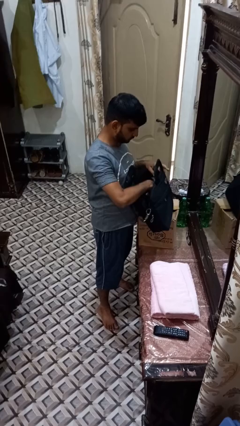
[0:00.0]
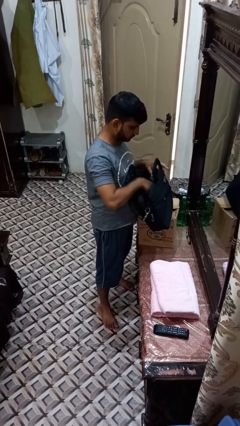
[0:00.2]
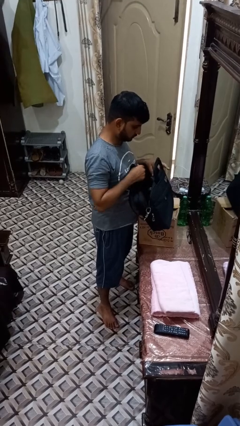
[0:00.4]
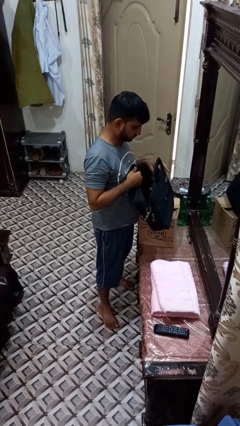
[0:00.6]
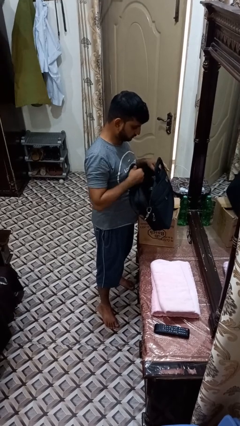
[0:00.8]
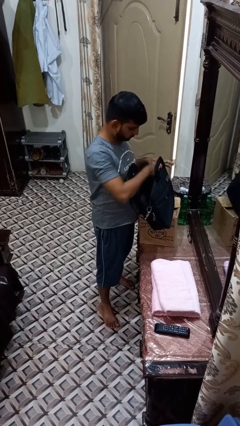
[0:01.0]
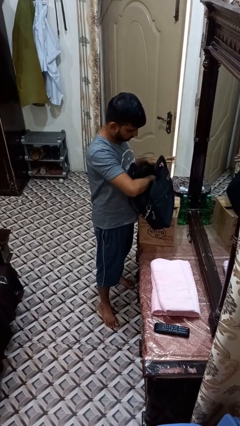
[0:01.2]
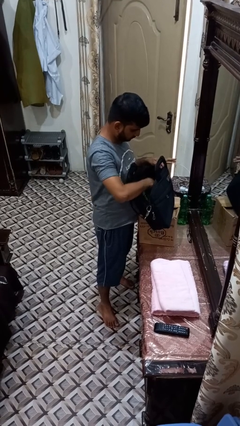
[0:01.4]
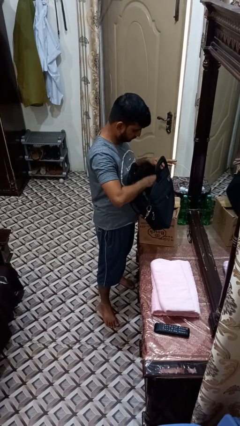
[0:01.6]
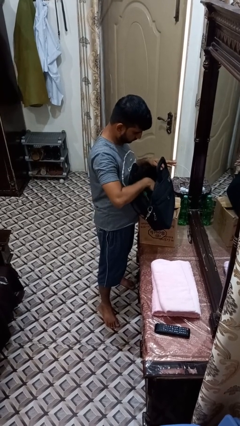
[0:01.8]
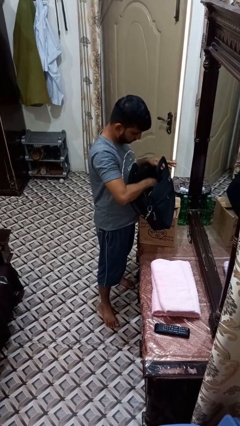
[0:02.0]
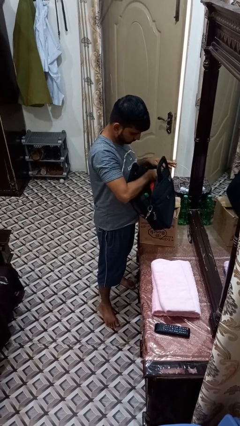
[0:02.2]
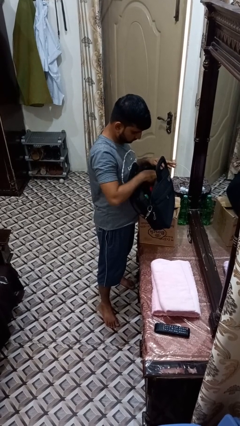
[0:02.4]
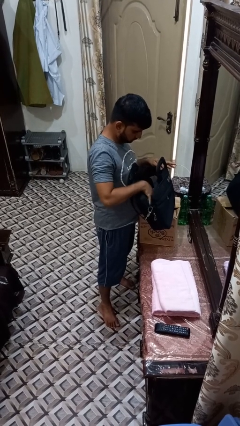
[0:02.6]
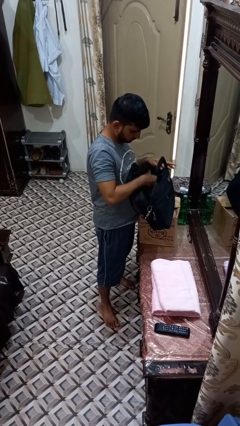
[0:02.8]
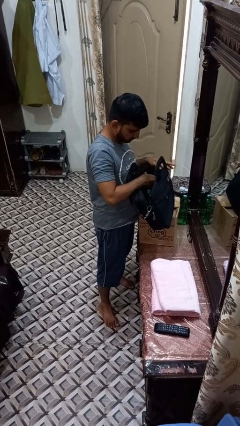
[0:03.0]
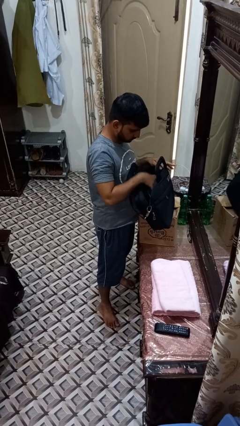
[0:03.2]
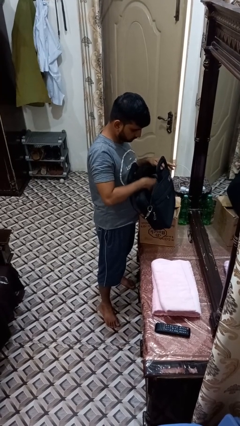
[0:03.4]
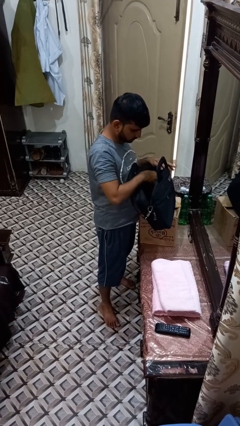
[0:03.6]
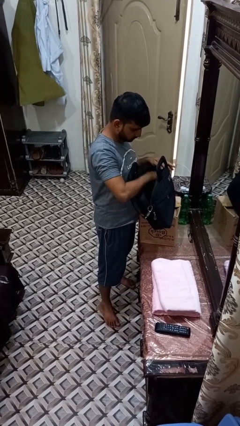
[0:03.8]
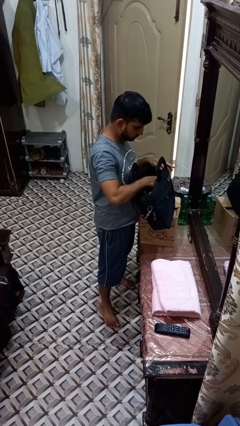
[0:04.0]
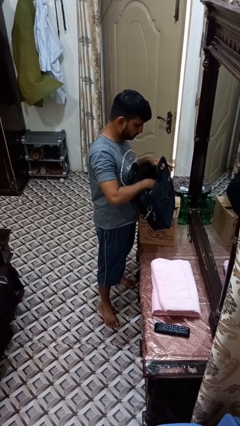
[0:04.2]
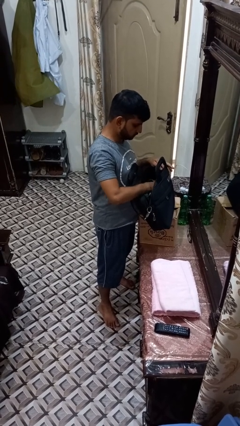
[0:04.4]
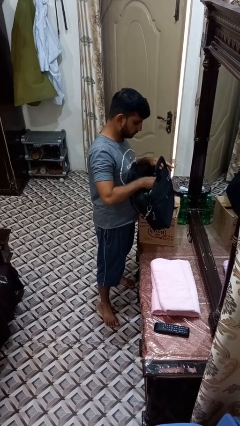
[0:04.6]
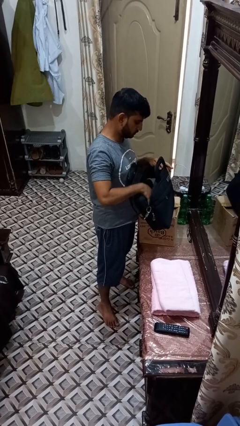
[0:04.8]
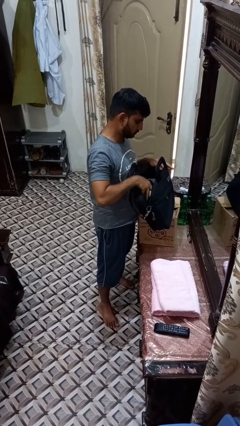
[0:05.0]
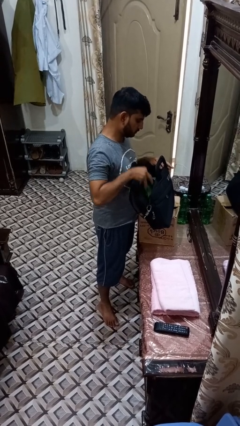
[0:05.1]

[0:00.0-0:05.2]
person searches in bag

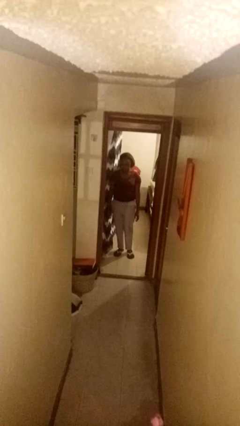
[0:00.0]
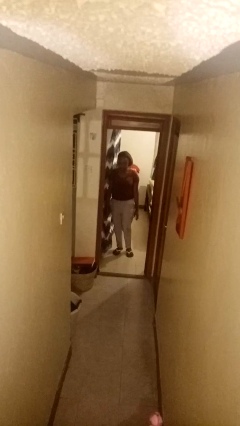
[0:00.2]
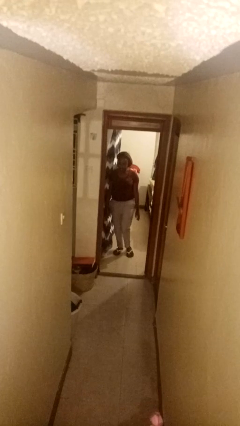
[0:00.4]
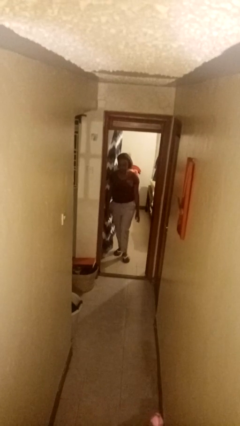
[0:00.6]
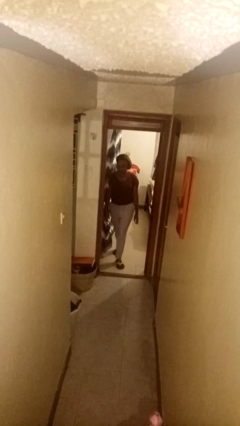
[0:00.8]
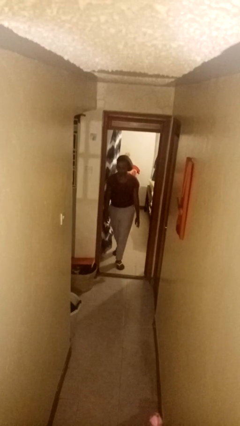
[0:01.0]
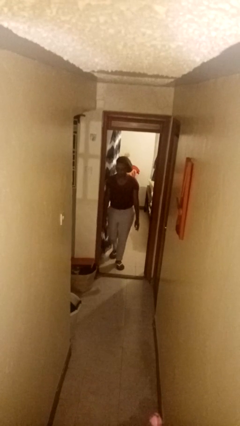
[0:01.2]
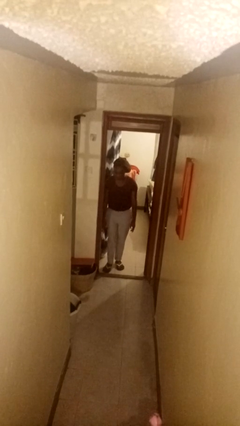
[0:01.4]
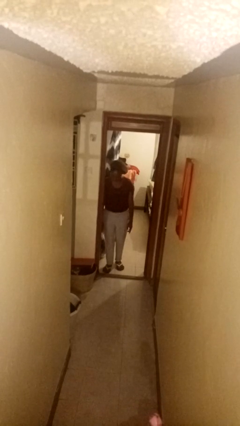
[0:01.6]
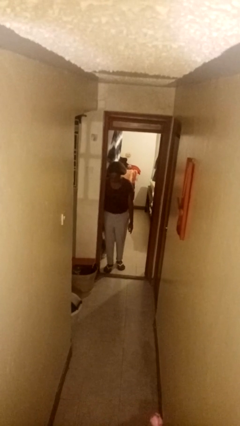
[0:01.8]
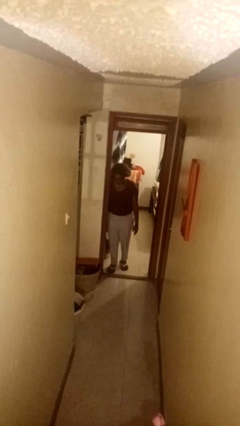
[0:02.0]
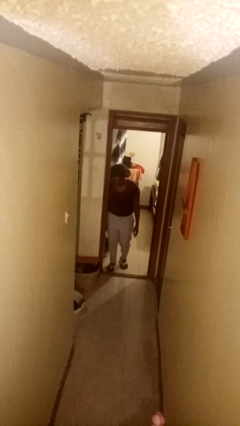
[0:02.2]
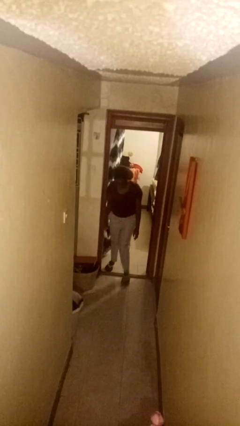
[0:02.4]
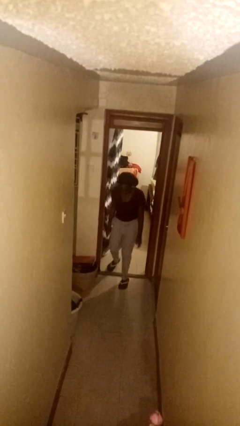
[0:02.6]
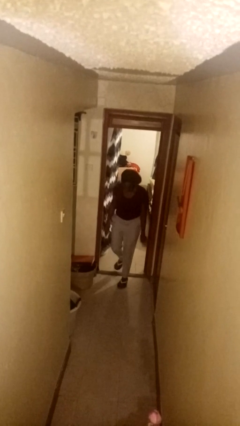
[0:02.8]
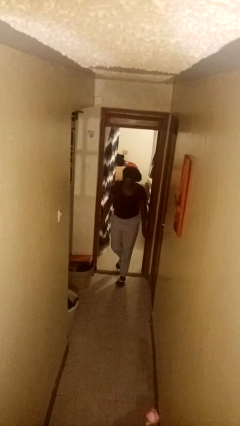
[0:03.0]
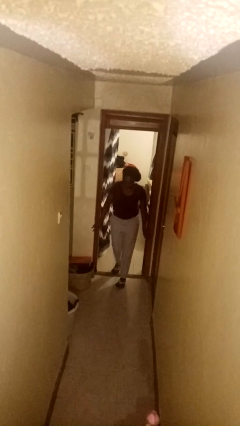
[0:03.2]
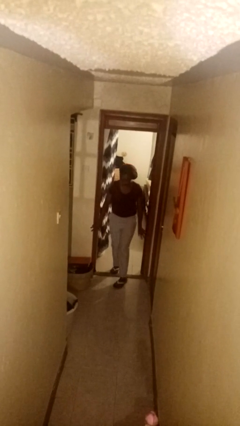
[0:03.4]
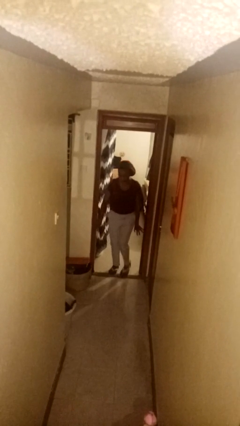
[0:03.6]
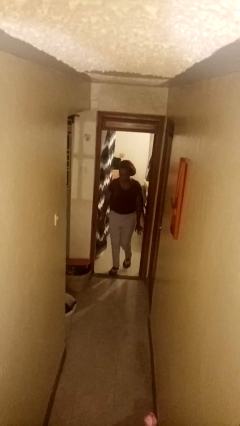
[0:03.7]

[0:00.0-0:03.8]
person bumps into wall

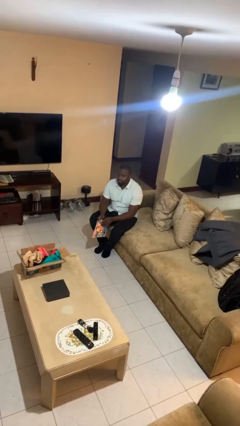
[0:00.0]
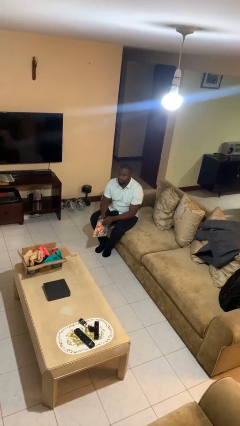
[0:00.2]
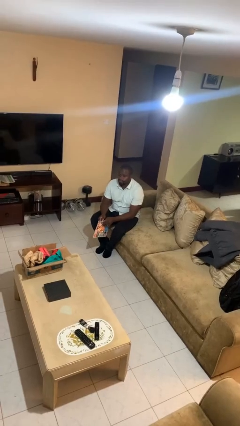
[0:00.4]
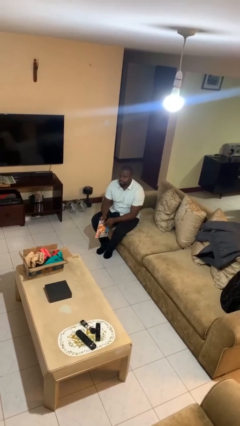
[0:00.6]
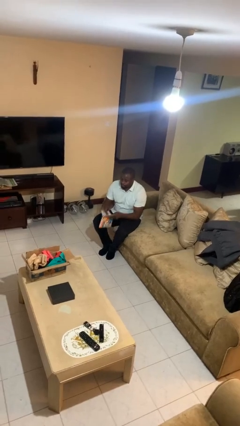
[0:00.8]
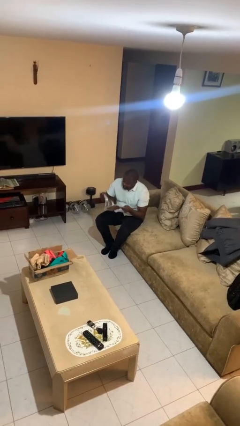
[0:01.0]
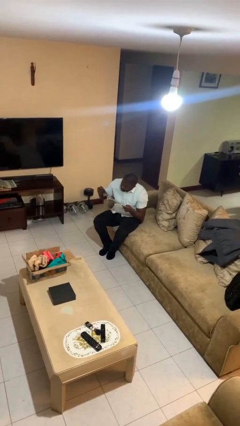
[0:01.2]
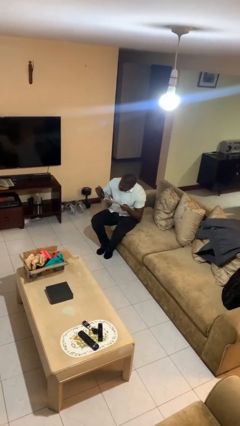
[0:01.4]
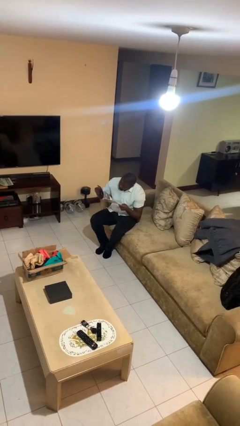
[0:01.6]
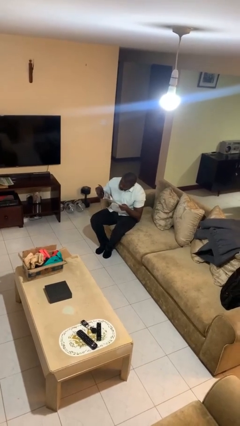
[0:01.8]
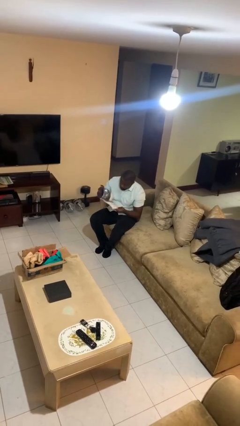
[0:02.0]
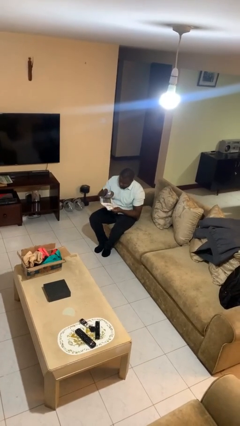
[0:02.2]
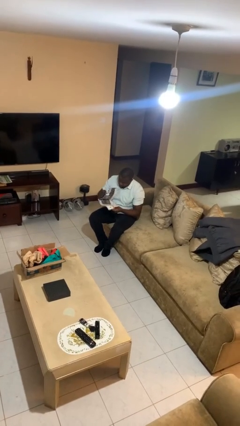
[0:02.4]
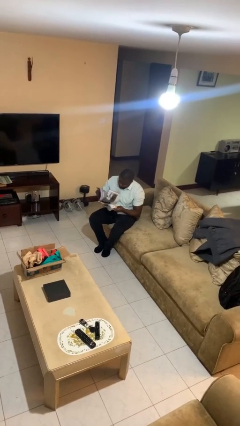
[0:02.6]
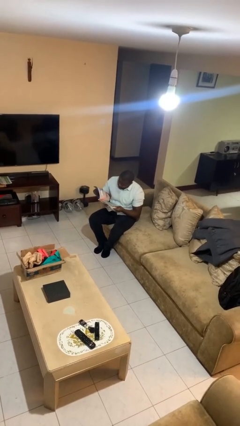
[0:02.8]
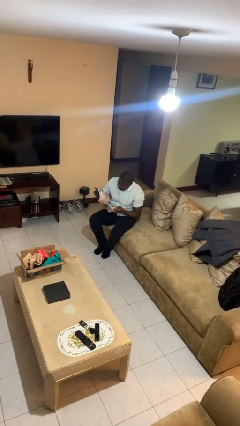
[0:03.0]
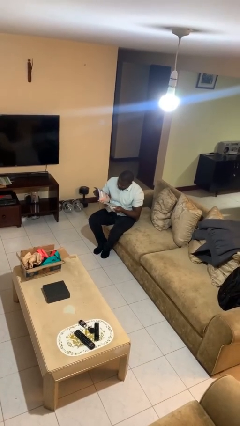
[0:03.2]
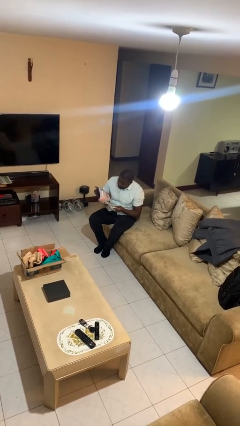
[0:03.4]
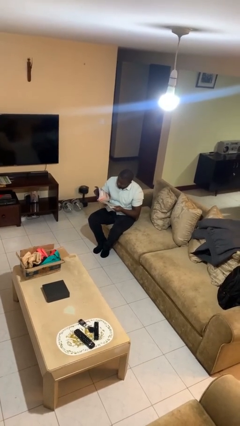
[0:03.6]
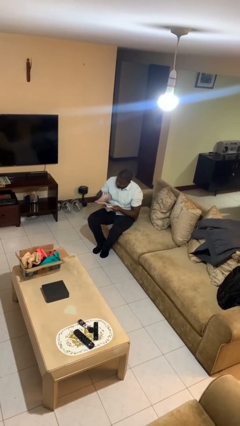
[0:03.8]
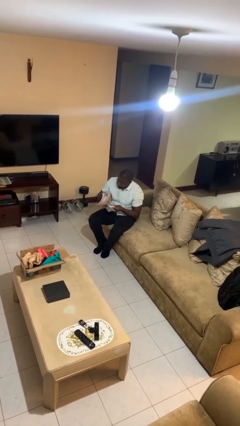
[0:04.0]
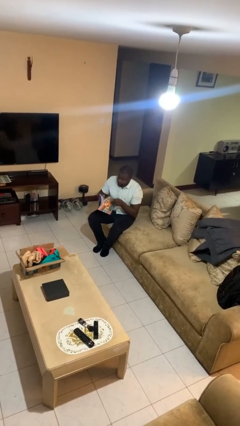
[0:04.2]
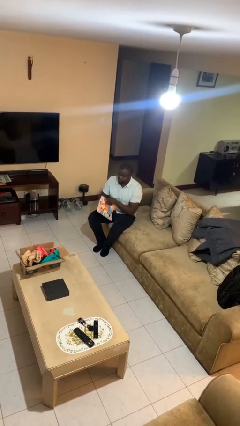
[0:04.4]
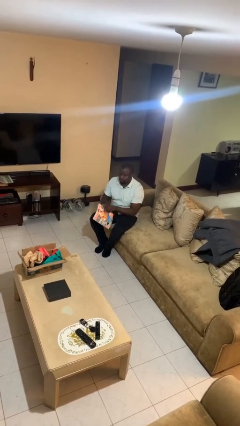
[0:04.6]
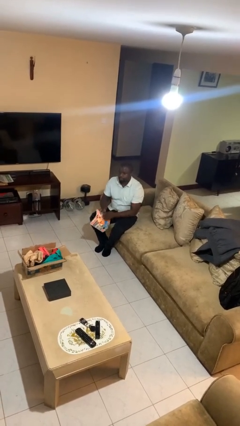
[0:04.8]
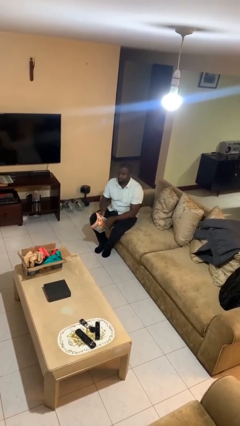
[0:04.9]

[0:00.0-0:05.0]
person reads magazine

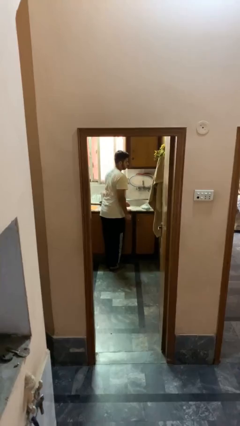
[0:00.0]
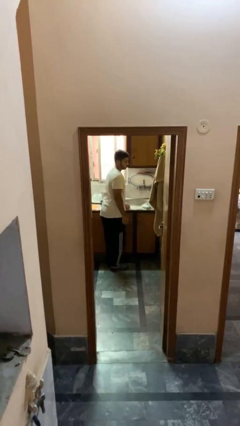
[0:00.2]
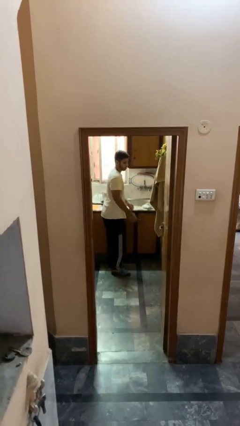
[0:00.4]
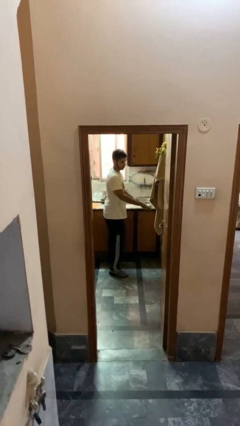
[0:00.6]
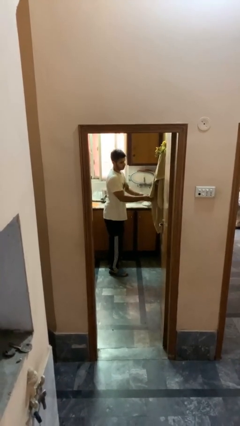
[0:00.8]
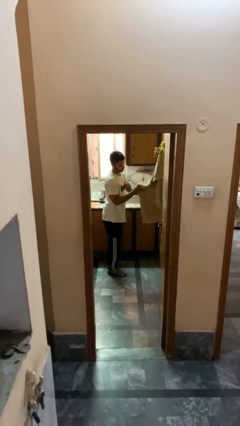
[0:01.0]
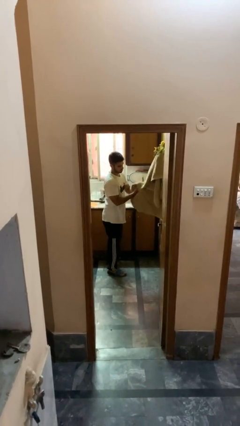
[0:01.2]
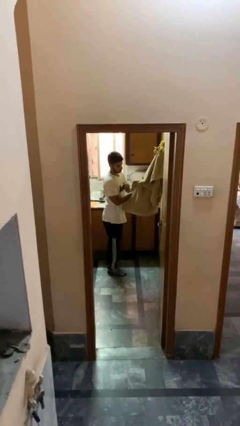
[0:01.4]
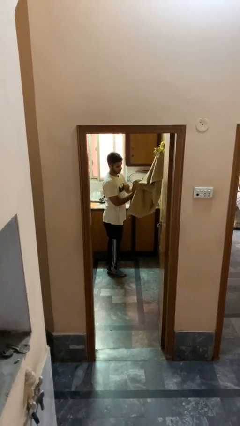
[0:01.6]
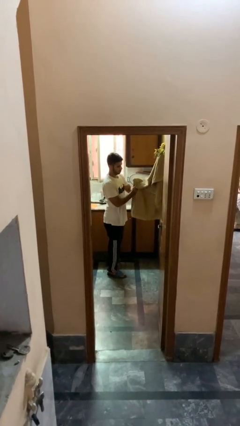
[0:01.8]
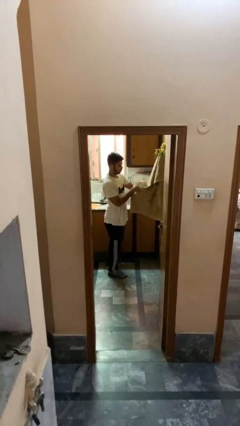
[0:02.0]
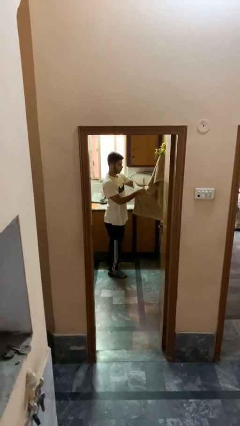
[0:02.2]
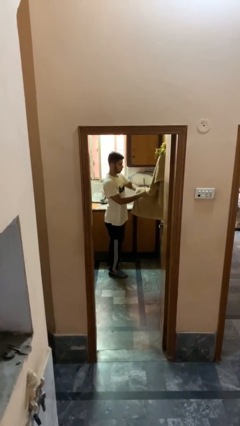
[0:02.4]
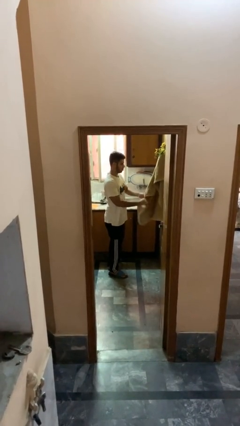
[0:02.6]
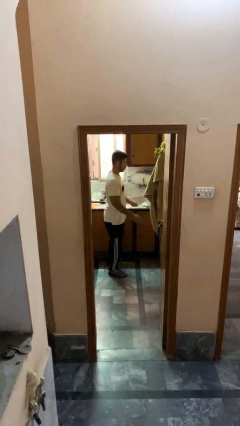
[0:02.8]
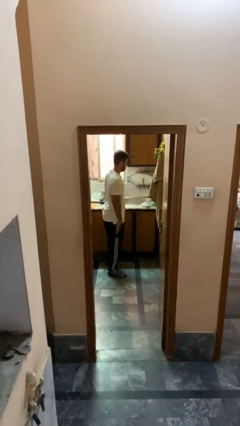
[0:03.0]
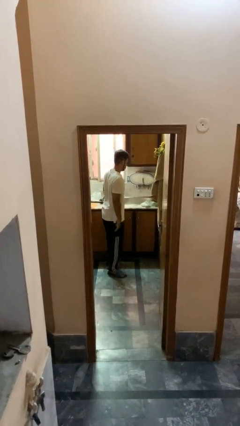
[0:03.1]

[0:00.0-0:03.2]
person dries hands with towel

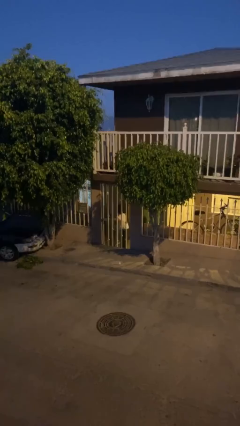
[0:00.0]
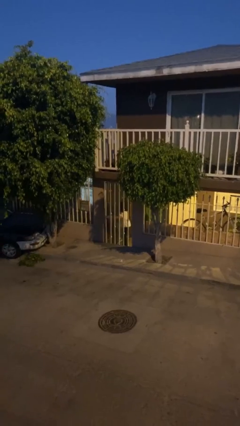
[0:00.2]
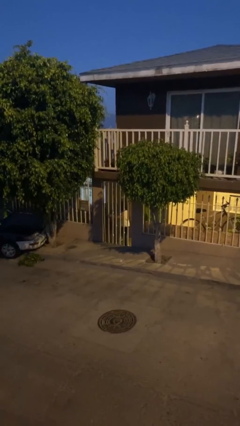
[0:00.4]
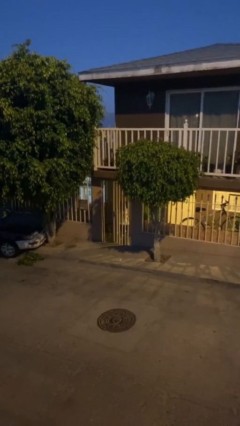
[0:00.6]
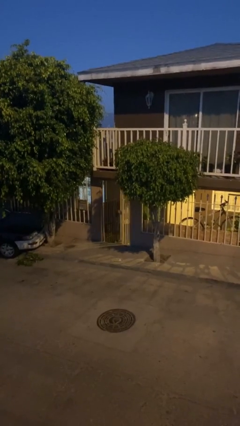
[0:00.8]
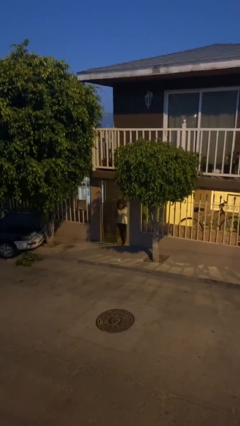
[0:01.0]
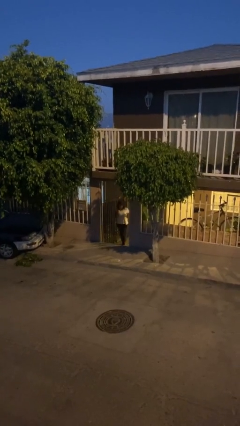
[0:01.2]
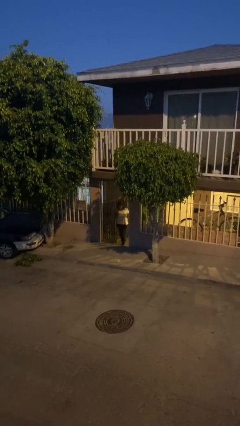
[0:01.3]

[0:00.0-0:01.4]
person opens facility door
